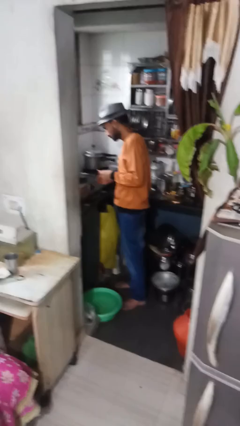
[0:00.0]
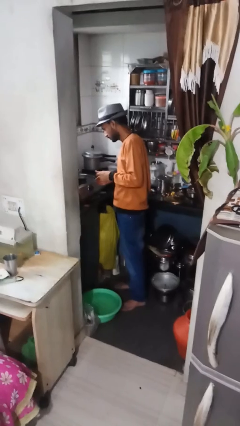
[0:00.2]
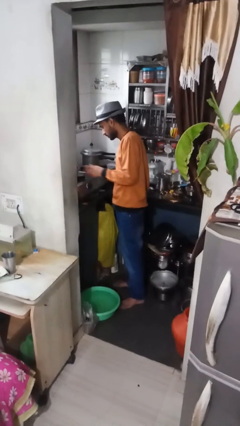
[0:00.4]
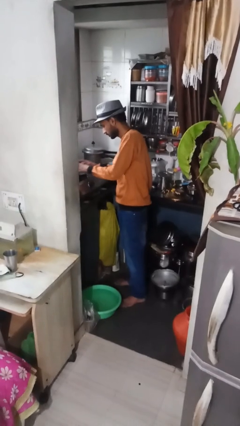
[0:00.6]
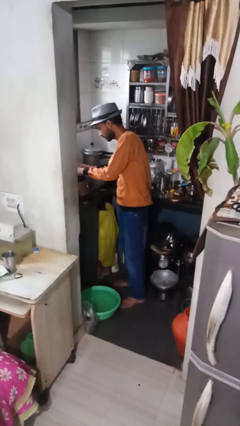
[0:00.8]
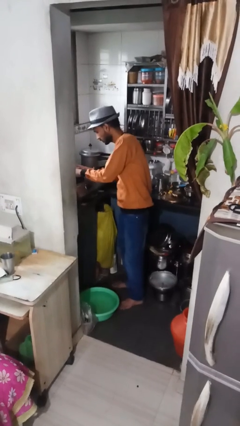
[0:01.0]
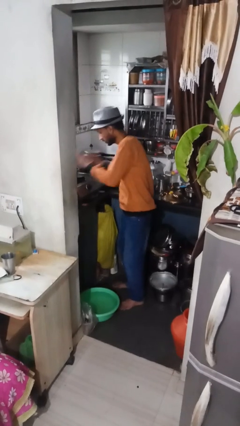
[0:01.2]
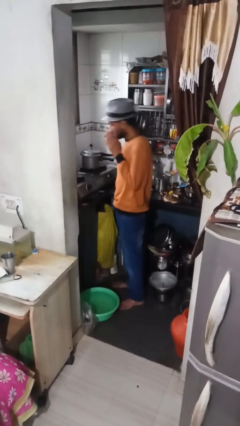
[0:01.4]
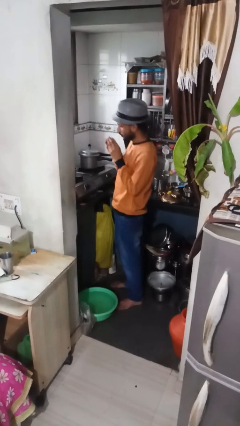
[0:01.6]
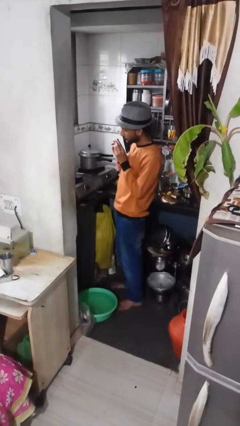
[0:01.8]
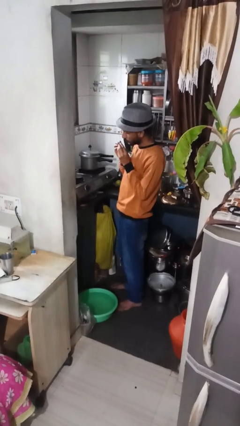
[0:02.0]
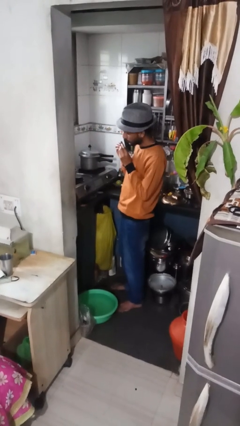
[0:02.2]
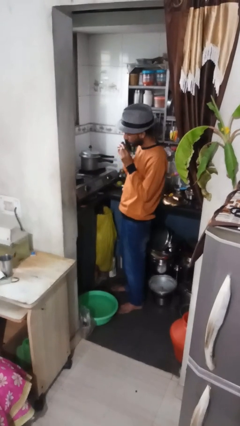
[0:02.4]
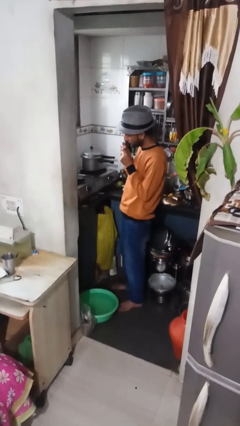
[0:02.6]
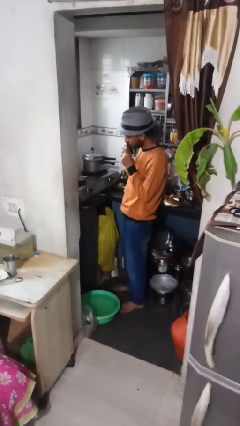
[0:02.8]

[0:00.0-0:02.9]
person burns hand

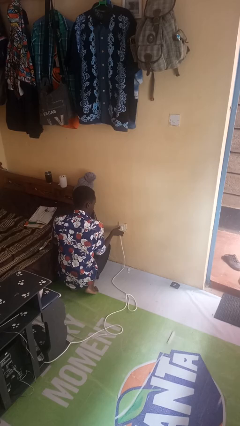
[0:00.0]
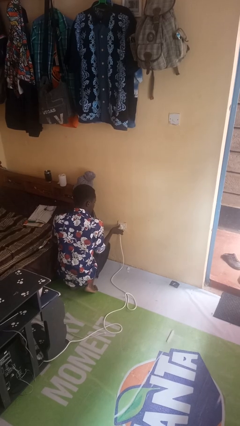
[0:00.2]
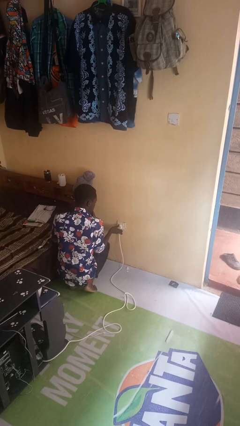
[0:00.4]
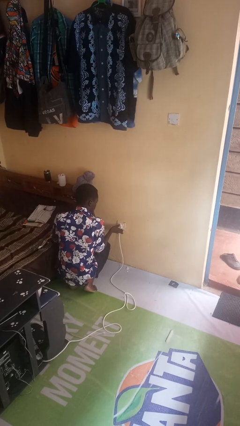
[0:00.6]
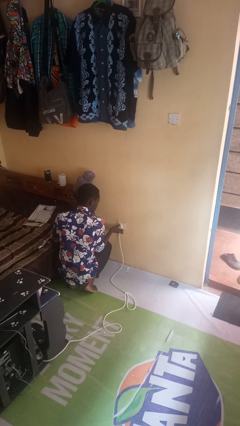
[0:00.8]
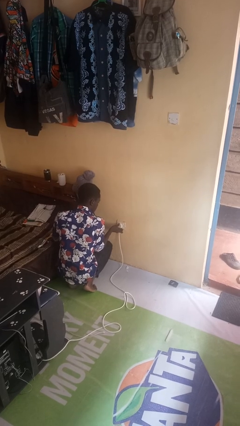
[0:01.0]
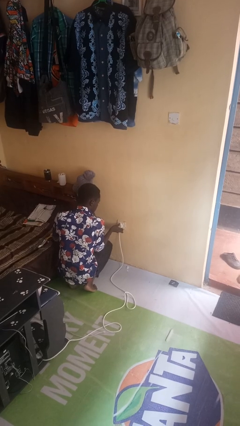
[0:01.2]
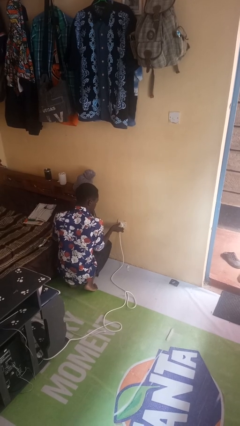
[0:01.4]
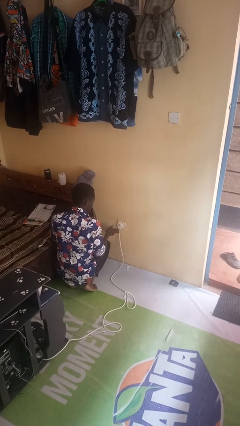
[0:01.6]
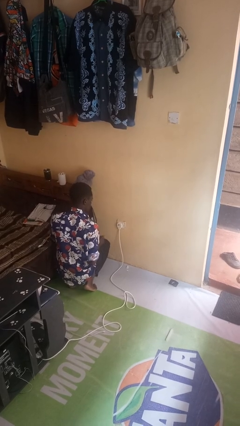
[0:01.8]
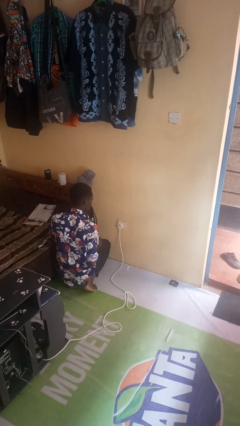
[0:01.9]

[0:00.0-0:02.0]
person plugs into electrical socket

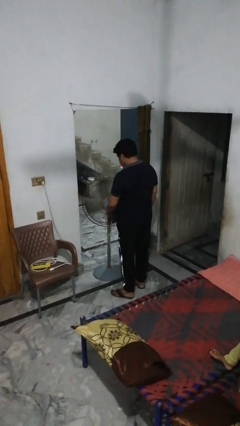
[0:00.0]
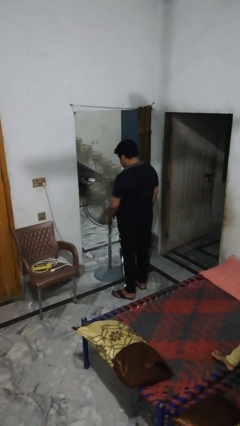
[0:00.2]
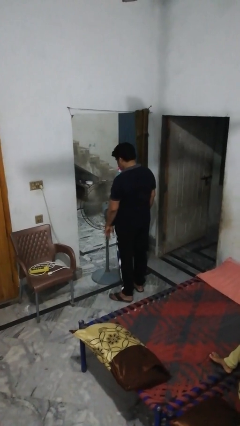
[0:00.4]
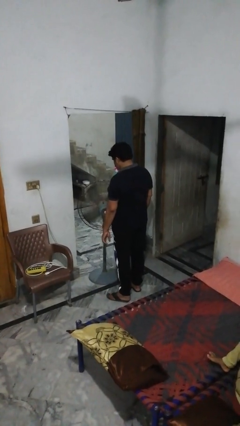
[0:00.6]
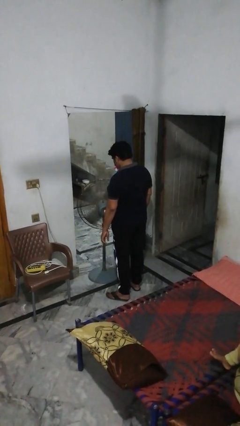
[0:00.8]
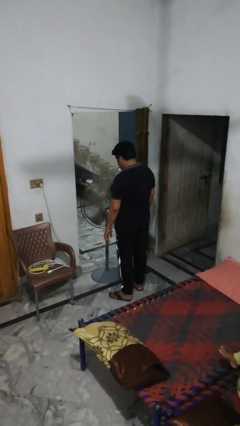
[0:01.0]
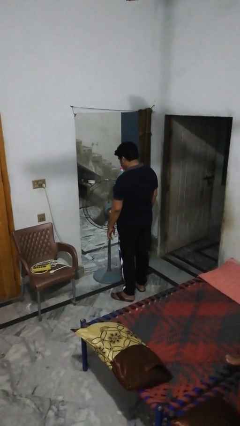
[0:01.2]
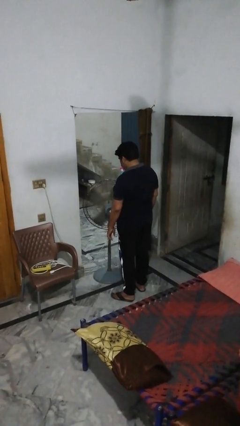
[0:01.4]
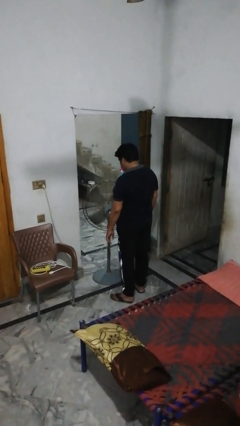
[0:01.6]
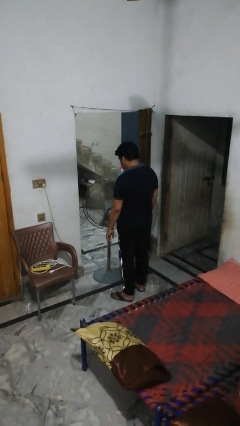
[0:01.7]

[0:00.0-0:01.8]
person turns off fan

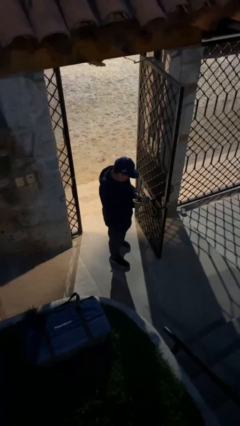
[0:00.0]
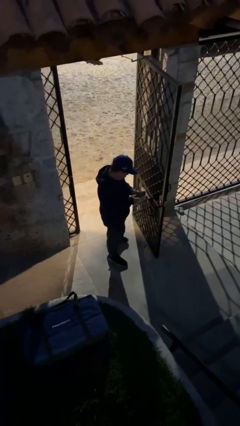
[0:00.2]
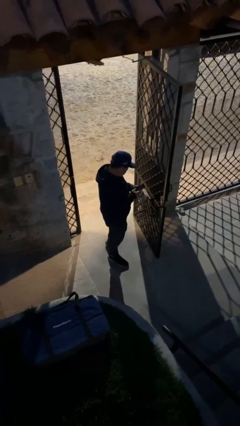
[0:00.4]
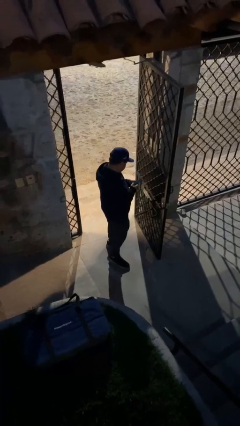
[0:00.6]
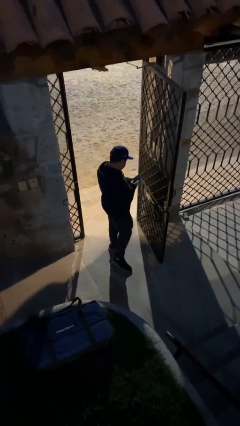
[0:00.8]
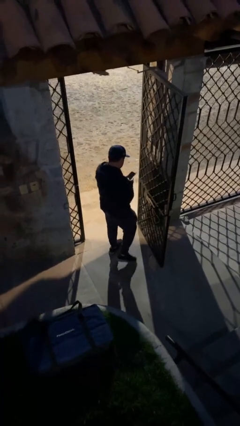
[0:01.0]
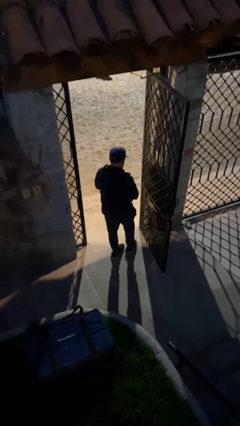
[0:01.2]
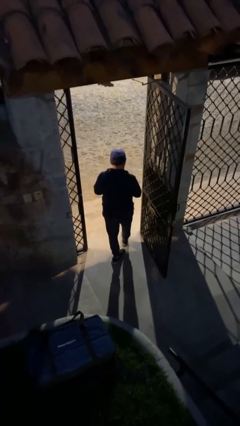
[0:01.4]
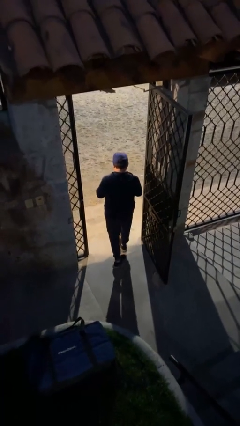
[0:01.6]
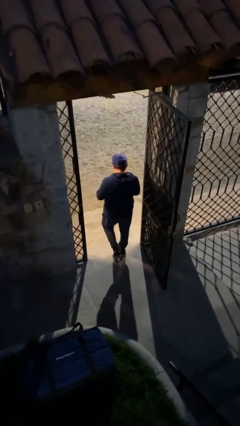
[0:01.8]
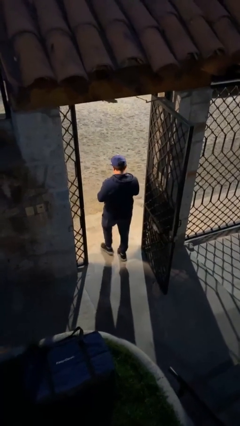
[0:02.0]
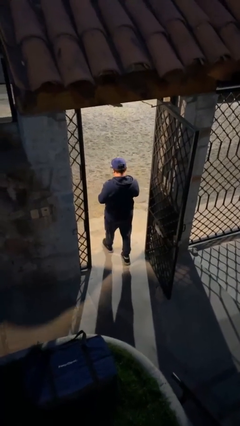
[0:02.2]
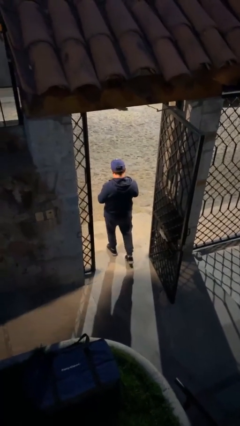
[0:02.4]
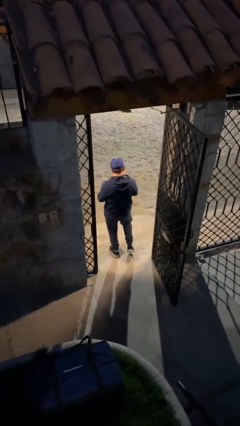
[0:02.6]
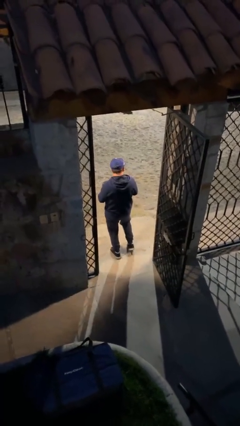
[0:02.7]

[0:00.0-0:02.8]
person exits scene through structure

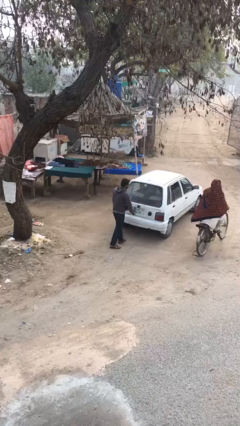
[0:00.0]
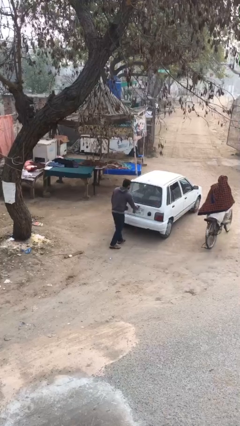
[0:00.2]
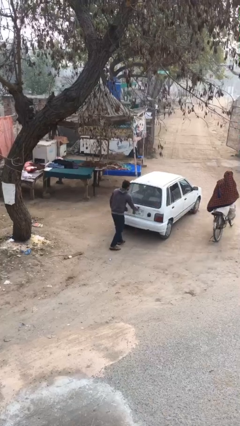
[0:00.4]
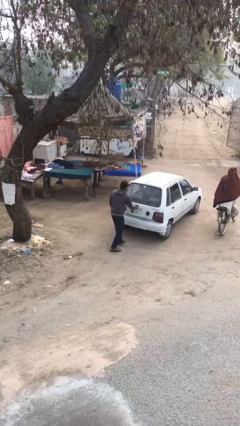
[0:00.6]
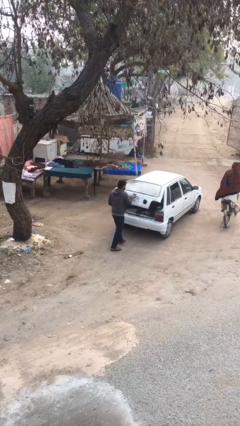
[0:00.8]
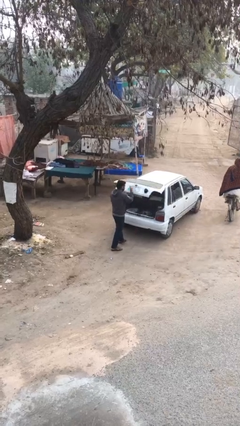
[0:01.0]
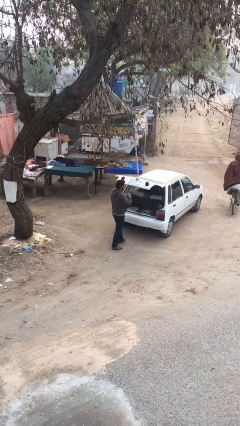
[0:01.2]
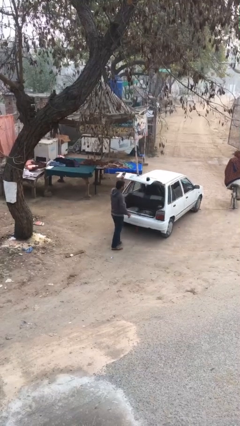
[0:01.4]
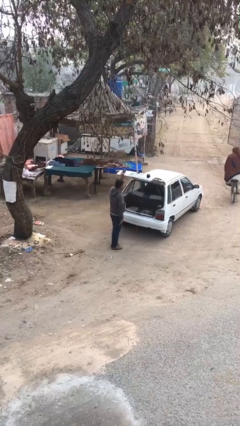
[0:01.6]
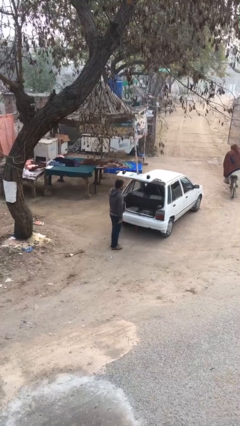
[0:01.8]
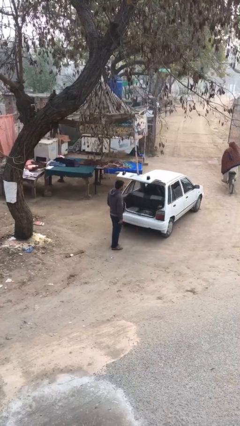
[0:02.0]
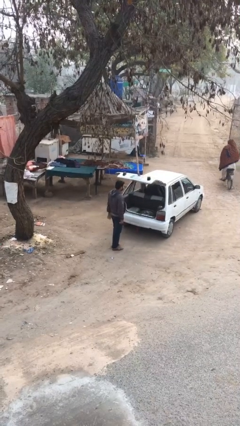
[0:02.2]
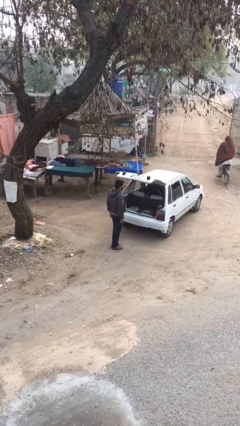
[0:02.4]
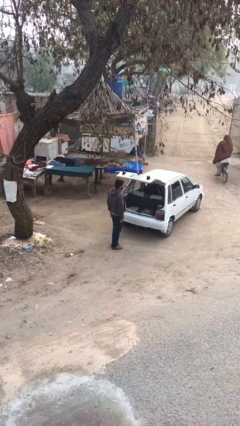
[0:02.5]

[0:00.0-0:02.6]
person opens car trunk

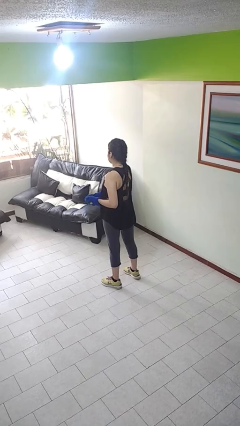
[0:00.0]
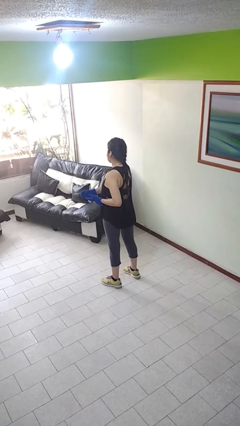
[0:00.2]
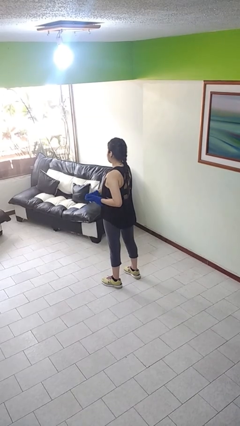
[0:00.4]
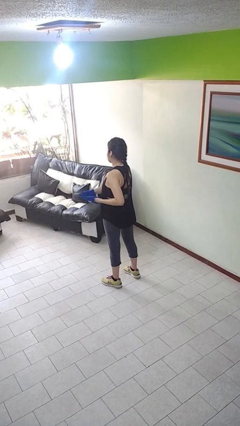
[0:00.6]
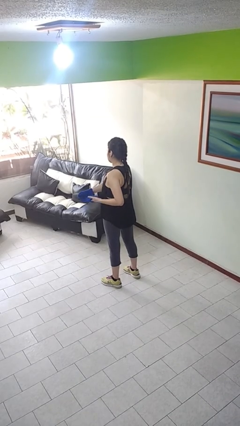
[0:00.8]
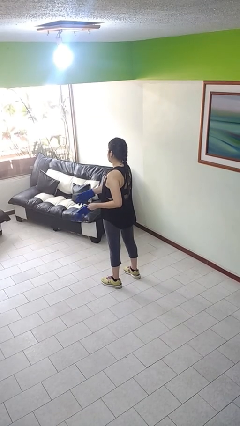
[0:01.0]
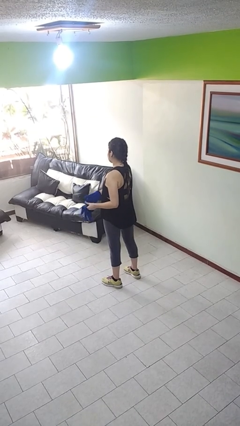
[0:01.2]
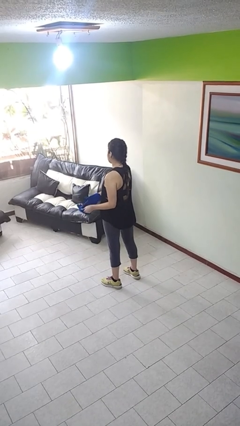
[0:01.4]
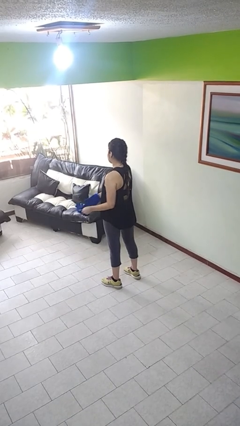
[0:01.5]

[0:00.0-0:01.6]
person takes off gloves

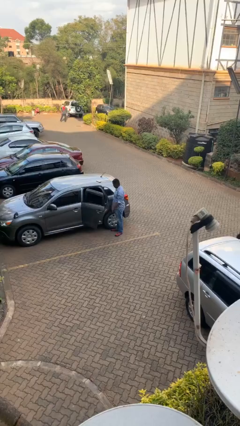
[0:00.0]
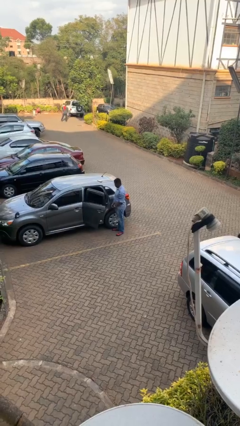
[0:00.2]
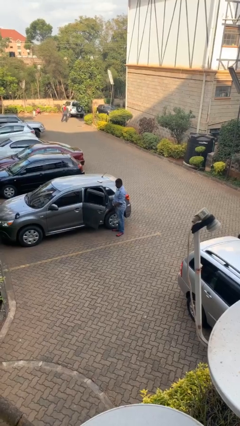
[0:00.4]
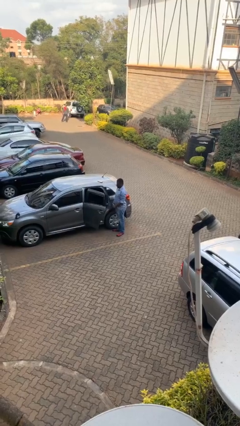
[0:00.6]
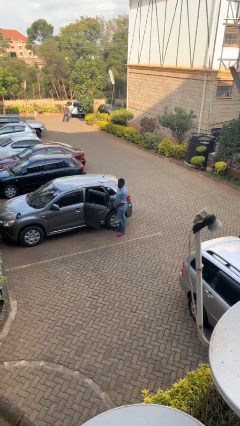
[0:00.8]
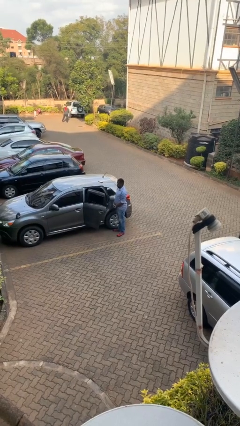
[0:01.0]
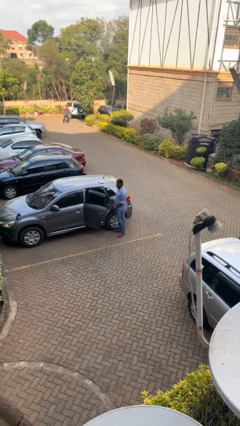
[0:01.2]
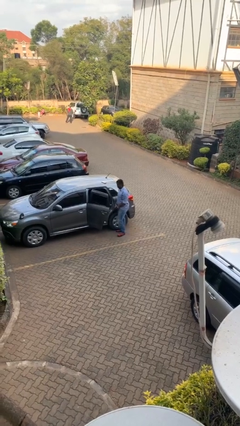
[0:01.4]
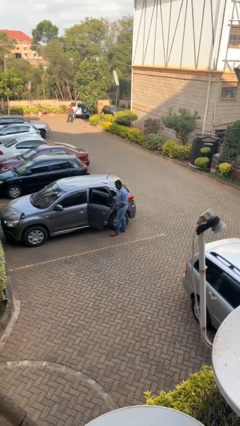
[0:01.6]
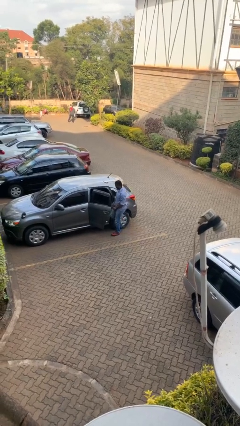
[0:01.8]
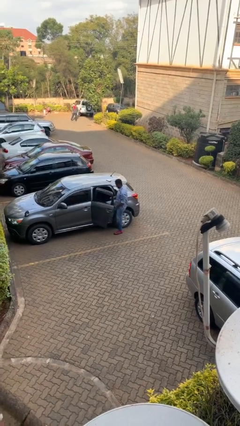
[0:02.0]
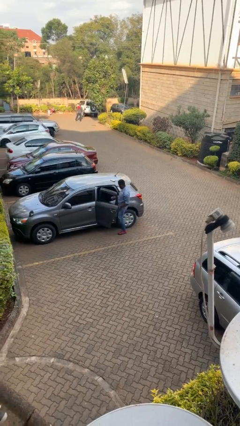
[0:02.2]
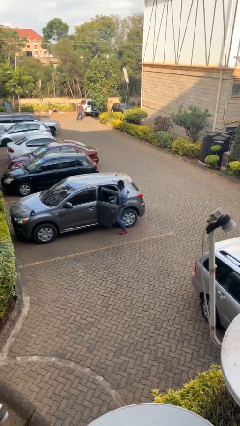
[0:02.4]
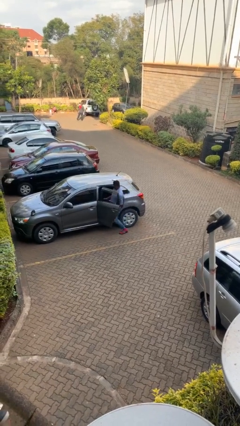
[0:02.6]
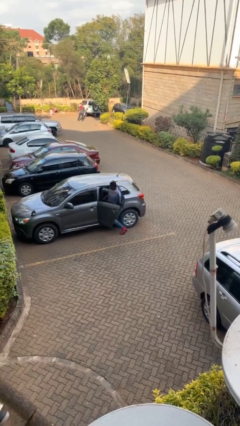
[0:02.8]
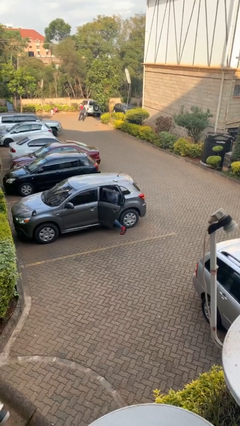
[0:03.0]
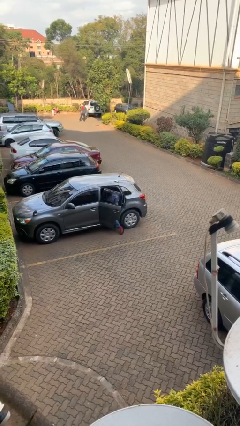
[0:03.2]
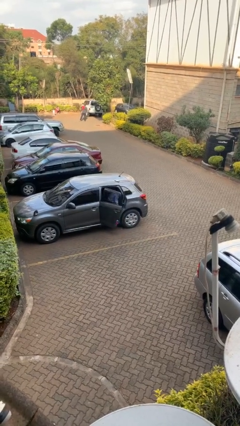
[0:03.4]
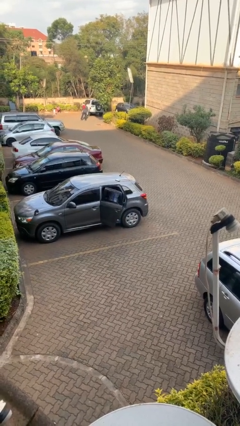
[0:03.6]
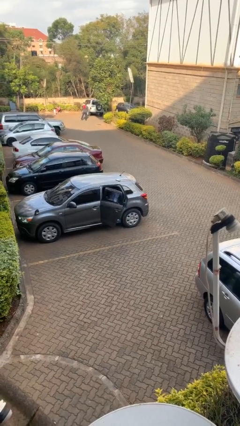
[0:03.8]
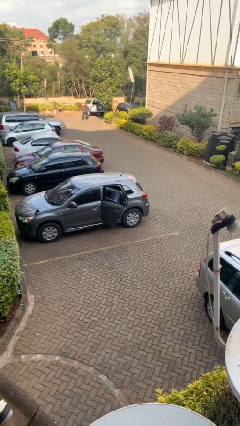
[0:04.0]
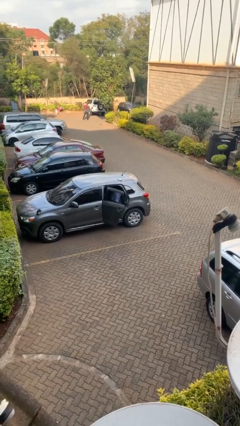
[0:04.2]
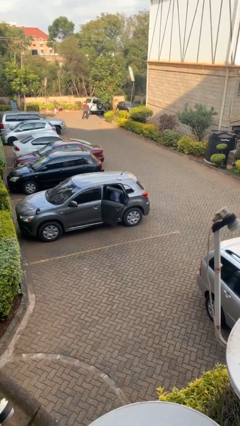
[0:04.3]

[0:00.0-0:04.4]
person enters car
